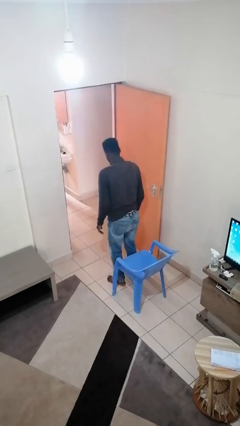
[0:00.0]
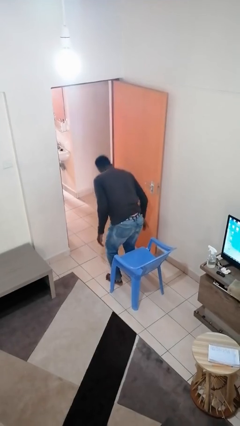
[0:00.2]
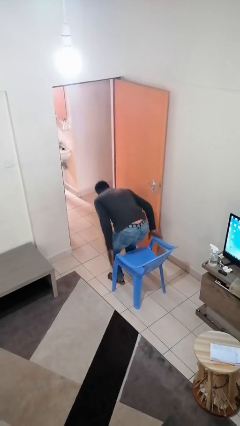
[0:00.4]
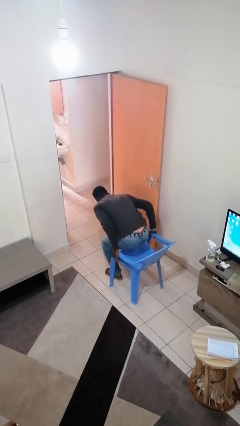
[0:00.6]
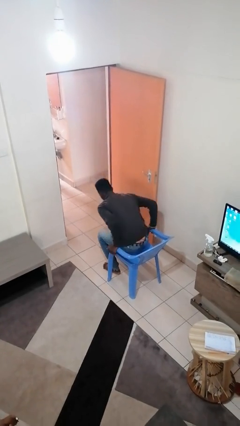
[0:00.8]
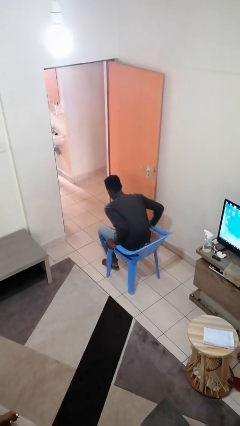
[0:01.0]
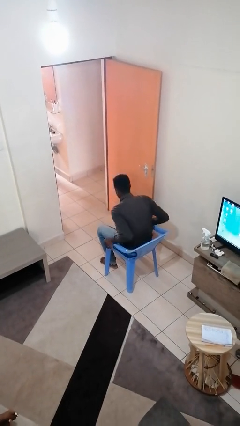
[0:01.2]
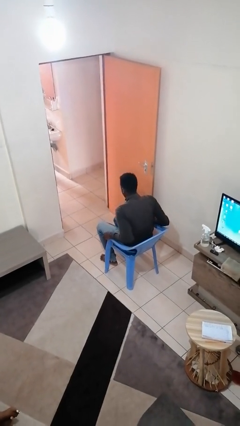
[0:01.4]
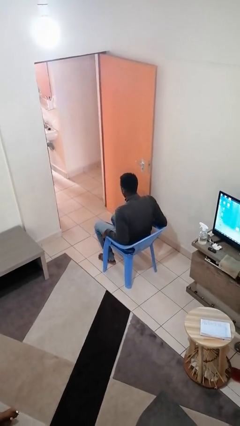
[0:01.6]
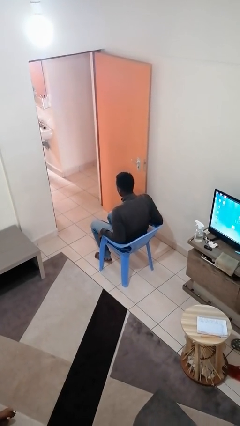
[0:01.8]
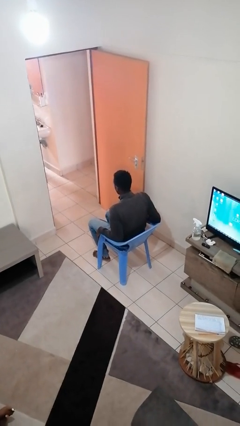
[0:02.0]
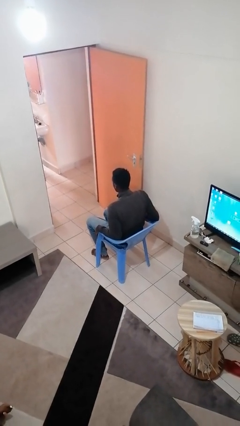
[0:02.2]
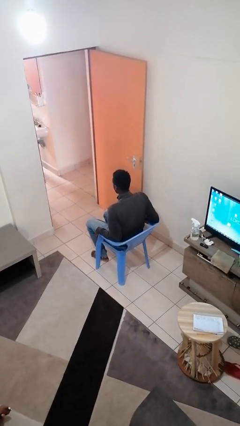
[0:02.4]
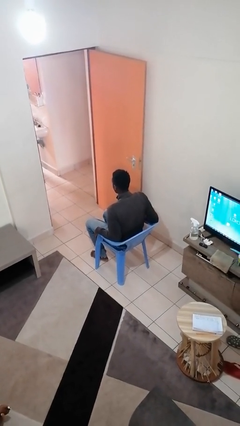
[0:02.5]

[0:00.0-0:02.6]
person sits down

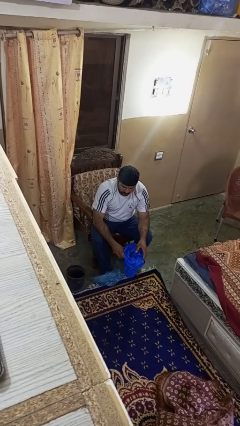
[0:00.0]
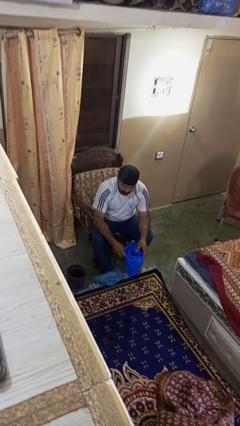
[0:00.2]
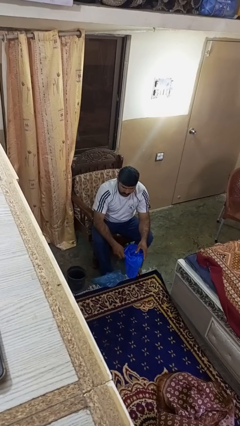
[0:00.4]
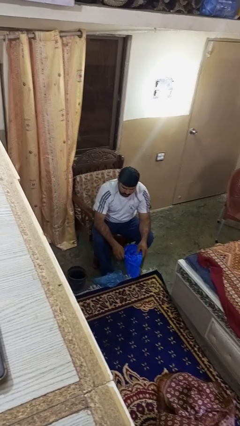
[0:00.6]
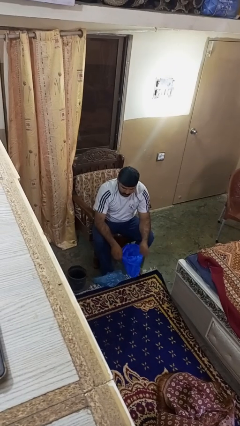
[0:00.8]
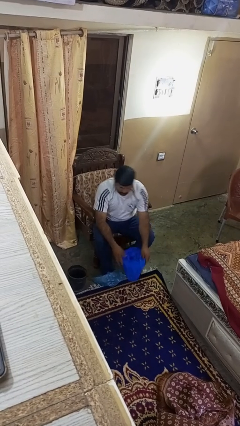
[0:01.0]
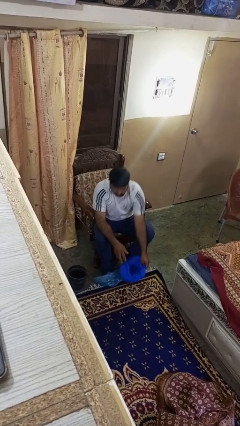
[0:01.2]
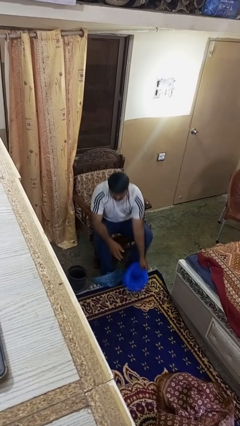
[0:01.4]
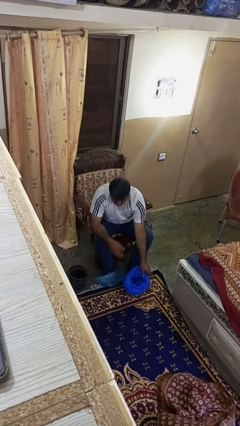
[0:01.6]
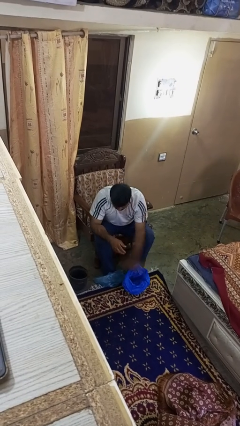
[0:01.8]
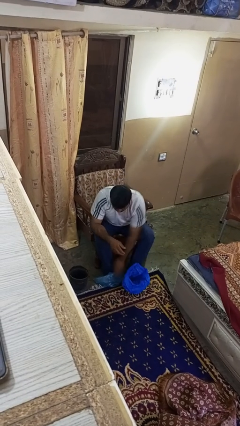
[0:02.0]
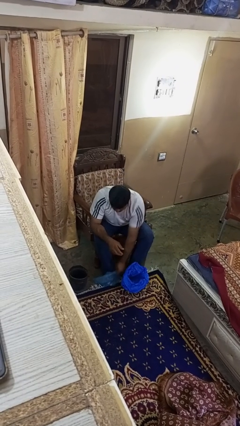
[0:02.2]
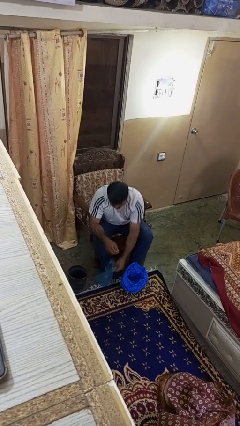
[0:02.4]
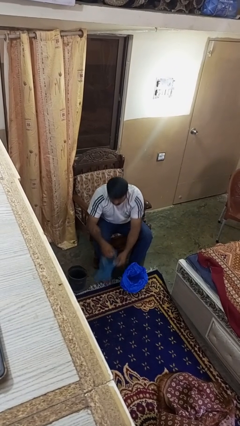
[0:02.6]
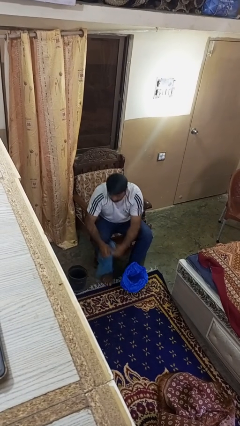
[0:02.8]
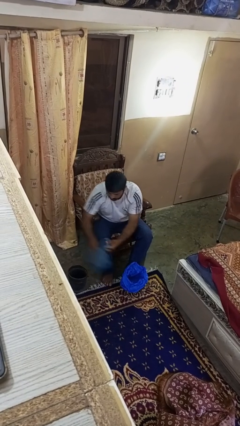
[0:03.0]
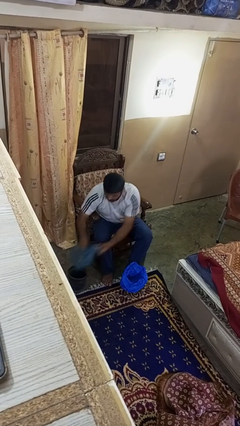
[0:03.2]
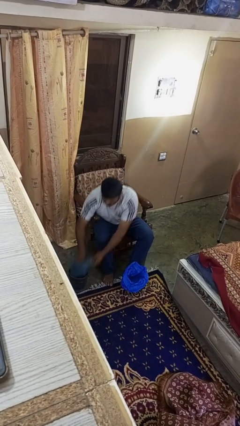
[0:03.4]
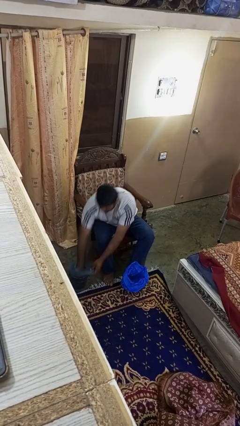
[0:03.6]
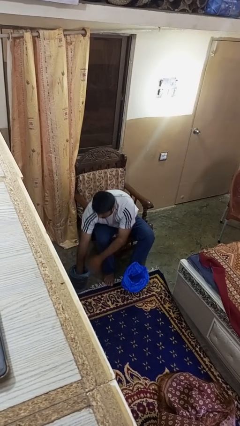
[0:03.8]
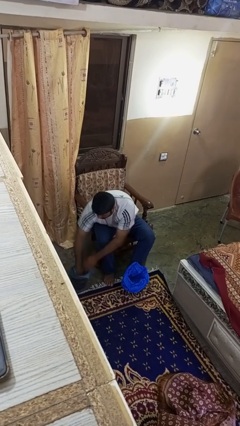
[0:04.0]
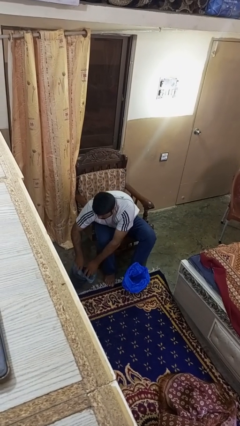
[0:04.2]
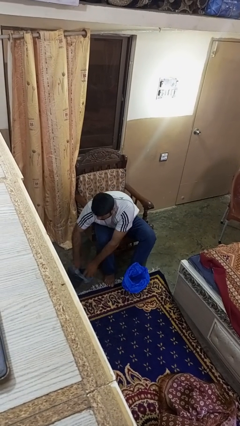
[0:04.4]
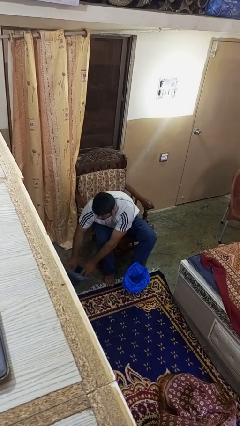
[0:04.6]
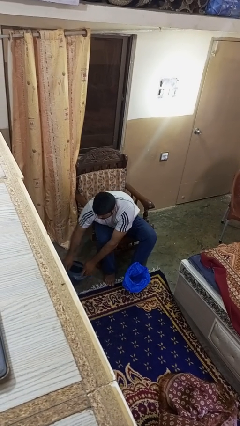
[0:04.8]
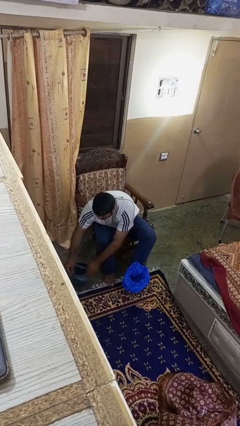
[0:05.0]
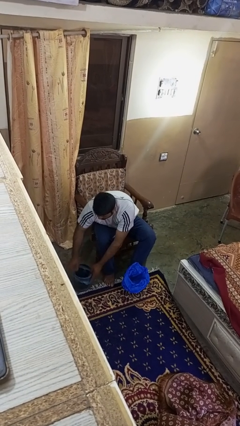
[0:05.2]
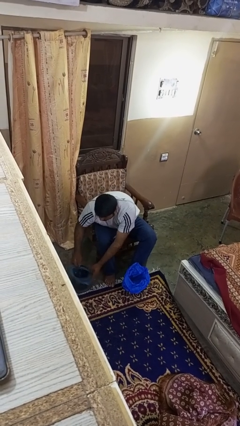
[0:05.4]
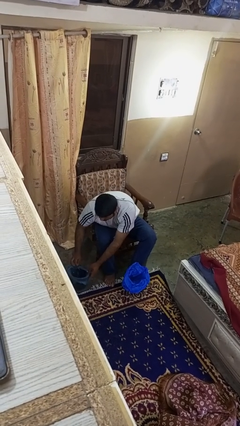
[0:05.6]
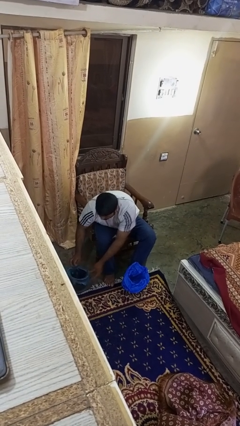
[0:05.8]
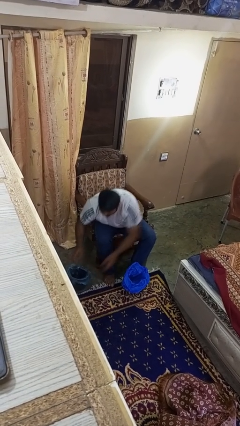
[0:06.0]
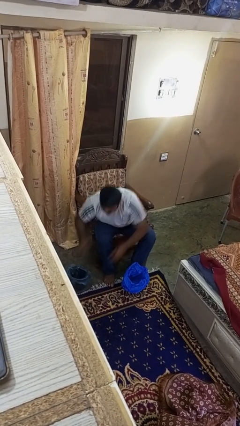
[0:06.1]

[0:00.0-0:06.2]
person inserts trashbag into trashcan

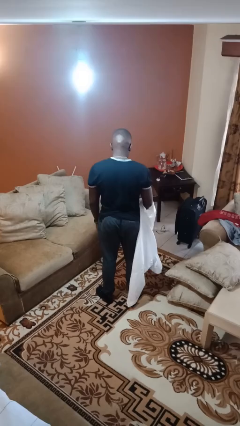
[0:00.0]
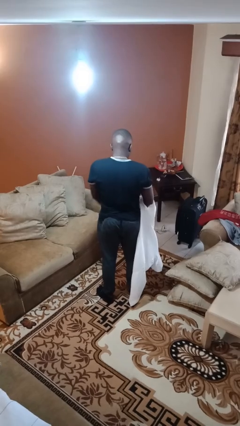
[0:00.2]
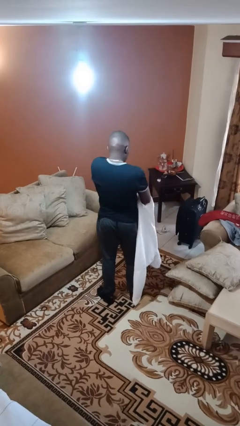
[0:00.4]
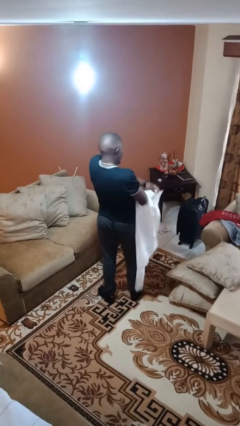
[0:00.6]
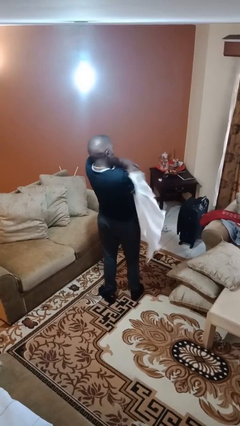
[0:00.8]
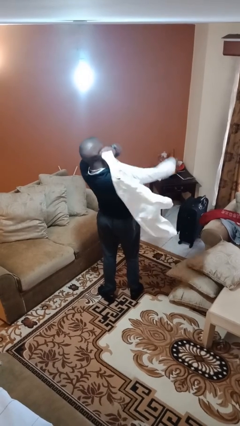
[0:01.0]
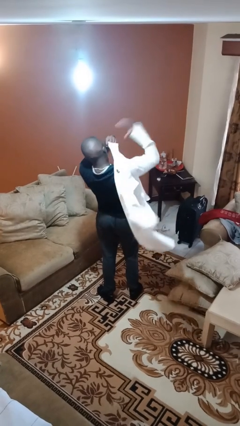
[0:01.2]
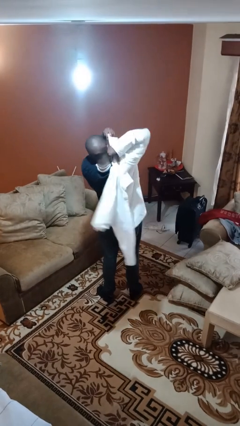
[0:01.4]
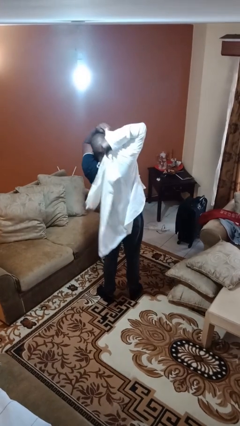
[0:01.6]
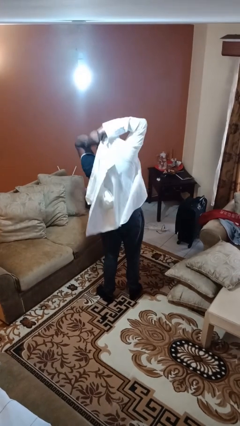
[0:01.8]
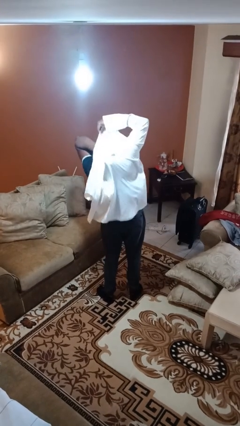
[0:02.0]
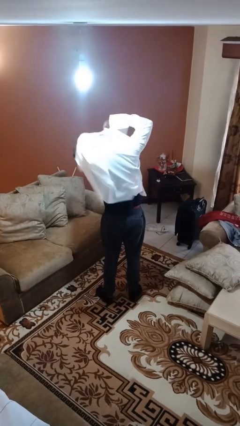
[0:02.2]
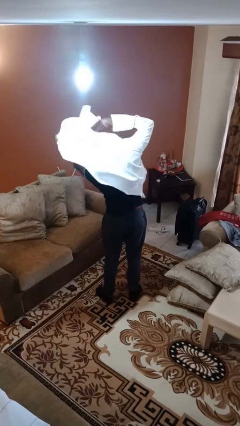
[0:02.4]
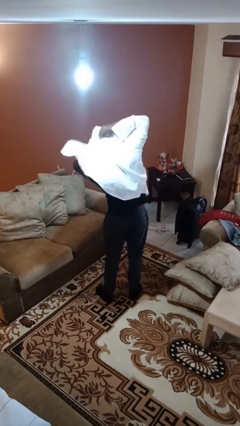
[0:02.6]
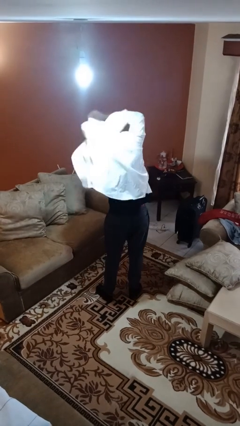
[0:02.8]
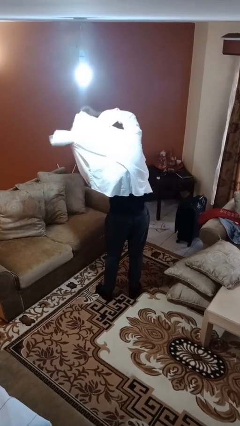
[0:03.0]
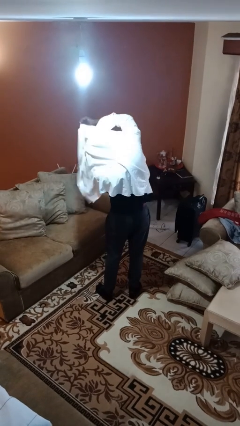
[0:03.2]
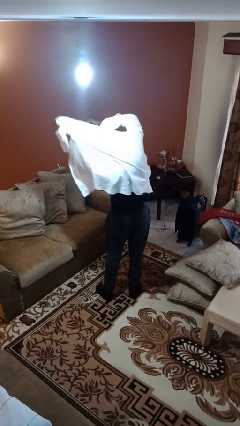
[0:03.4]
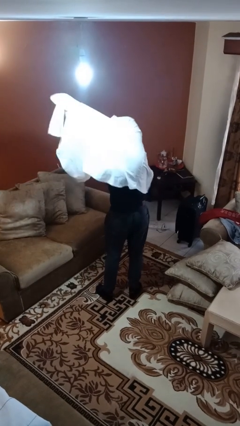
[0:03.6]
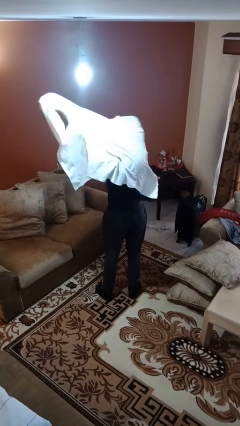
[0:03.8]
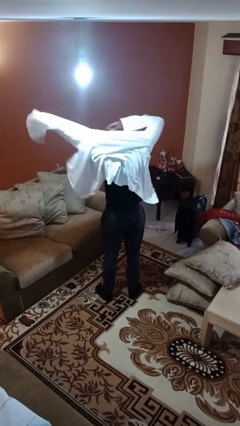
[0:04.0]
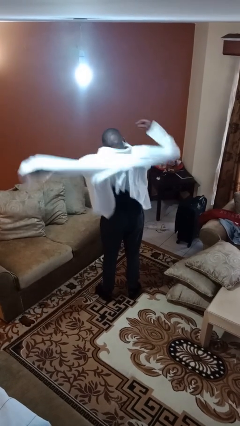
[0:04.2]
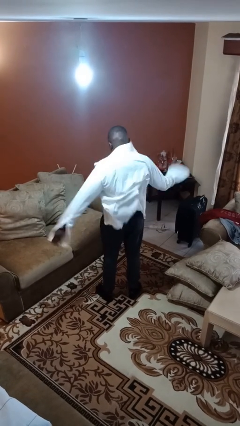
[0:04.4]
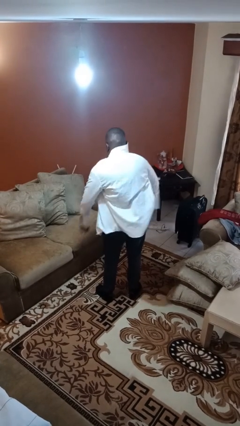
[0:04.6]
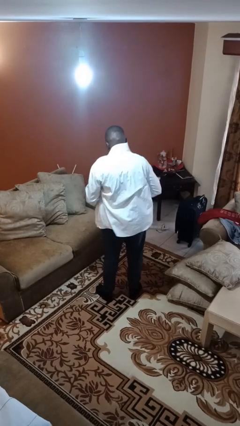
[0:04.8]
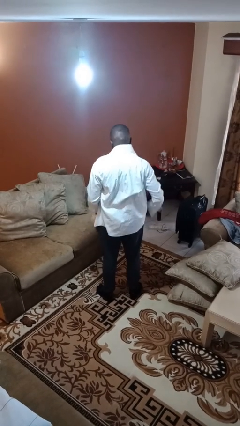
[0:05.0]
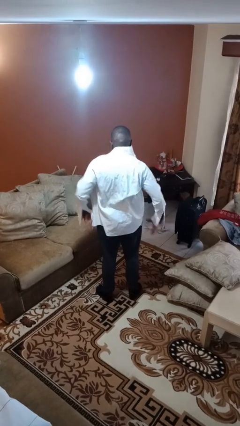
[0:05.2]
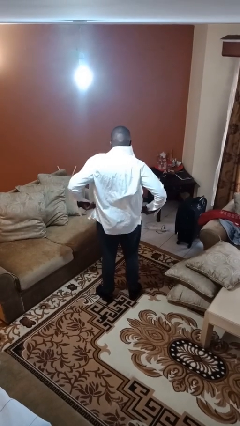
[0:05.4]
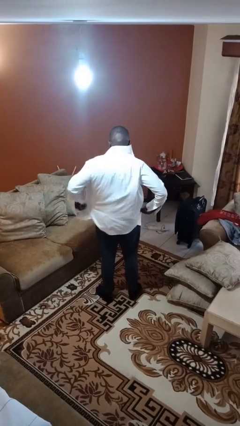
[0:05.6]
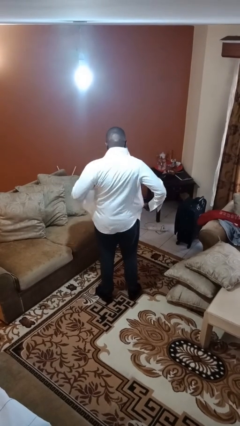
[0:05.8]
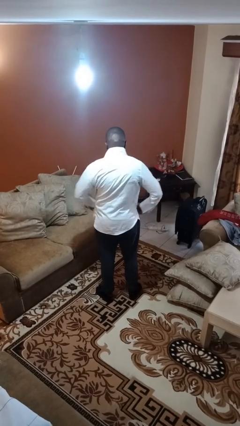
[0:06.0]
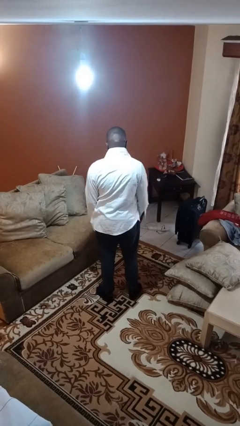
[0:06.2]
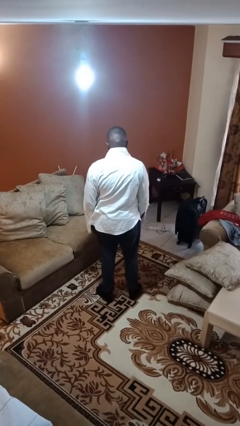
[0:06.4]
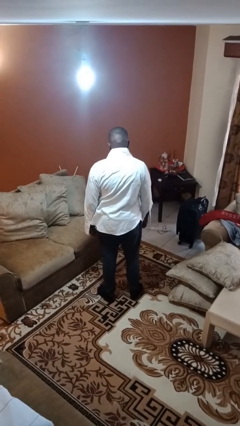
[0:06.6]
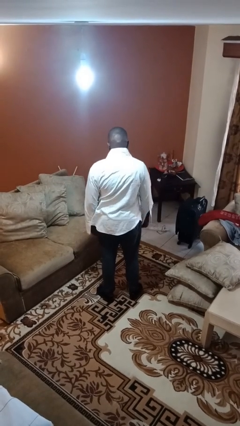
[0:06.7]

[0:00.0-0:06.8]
person puts on shirt

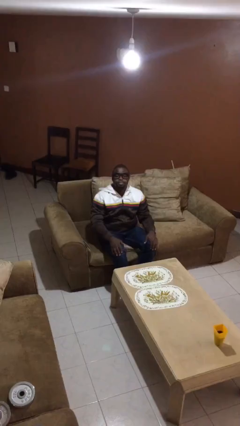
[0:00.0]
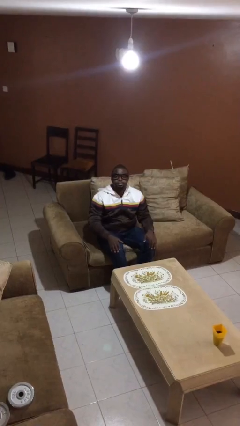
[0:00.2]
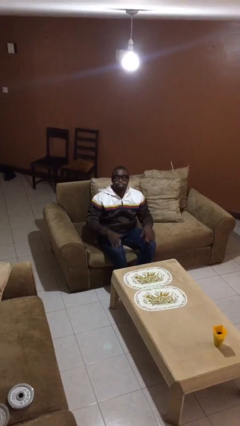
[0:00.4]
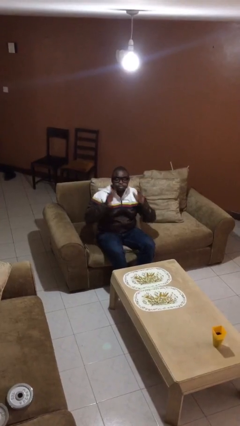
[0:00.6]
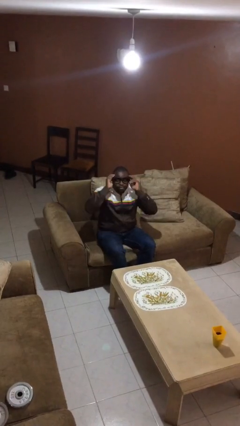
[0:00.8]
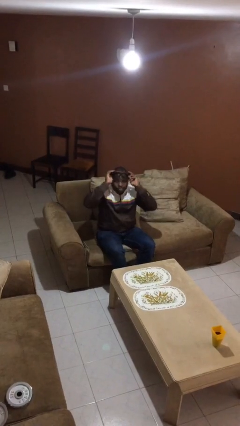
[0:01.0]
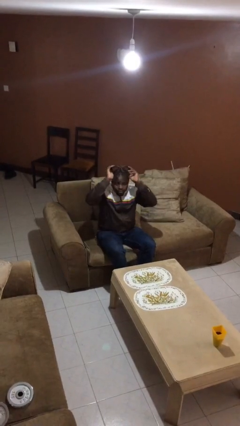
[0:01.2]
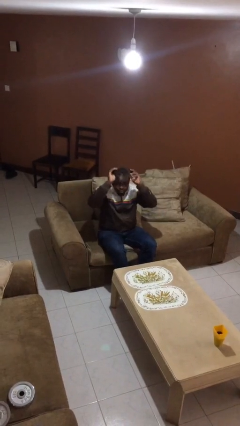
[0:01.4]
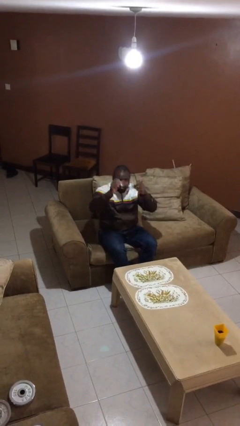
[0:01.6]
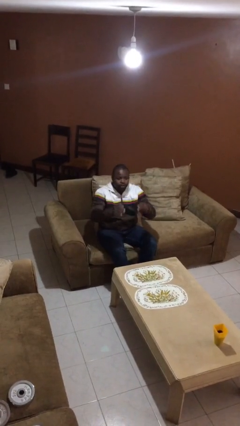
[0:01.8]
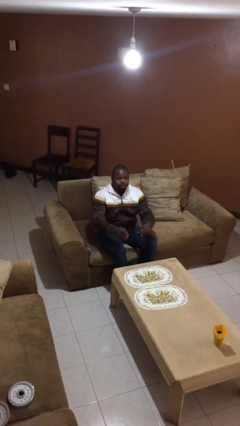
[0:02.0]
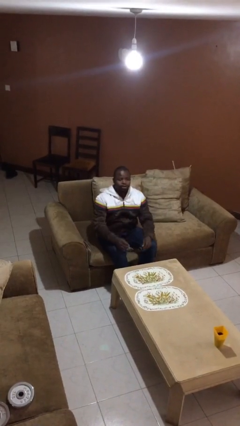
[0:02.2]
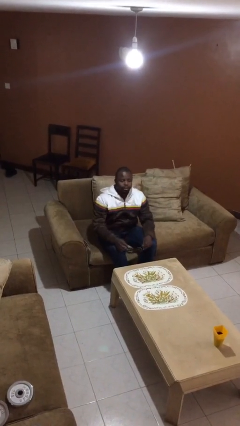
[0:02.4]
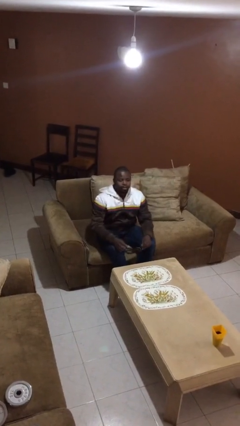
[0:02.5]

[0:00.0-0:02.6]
person takes off glasses
